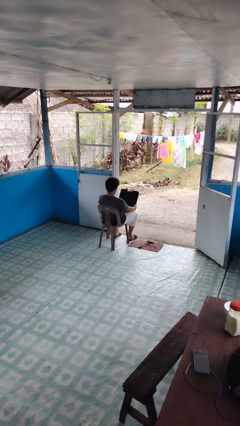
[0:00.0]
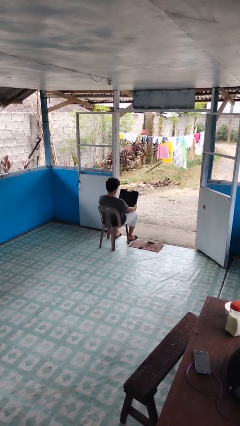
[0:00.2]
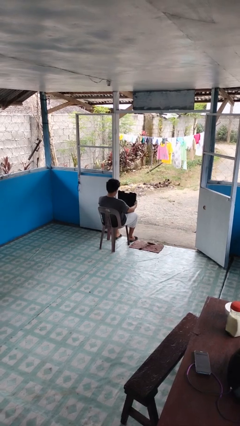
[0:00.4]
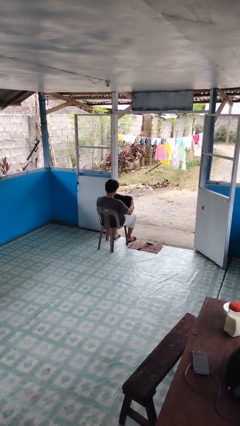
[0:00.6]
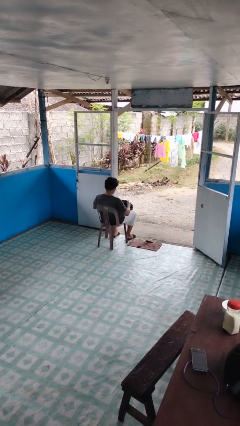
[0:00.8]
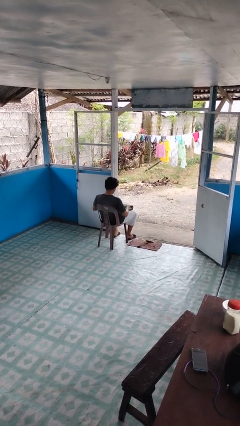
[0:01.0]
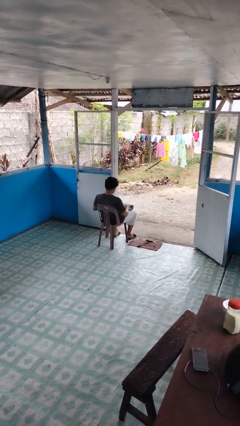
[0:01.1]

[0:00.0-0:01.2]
person closes suitcase

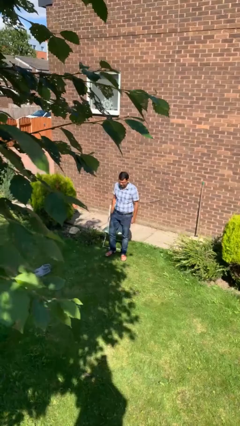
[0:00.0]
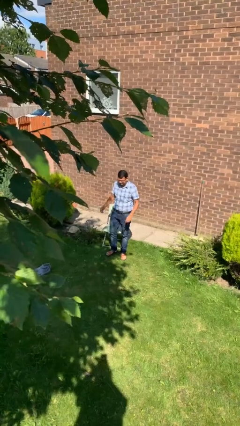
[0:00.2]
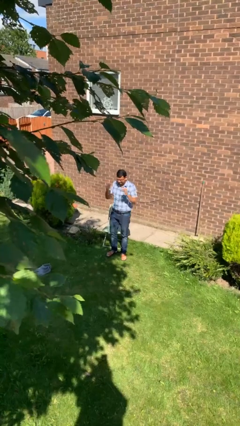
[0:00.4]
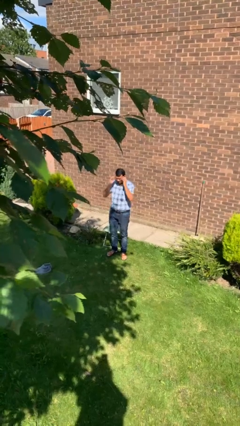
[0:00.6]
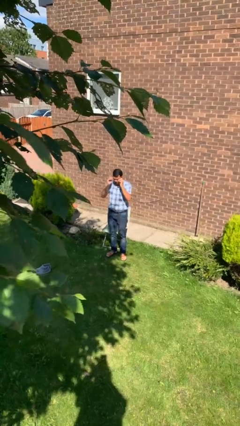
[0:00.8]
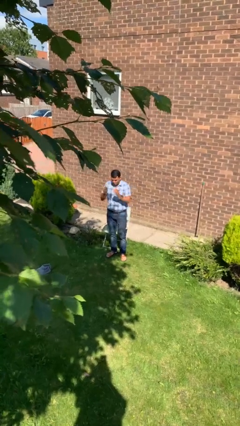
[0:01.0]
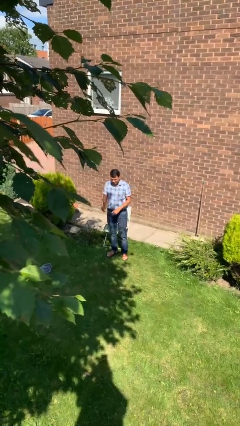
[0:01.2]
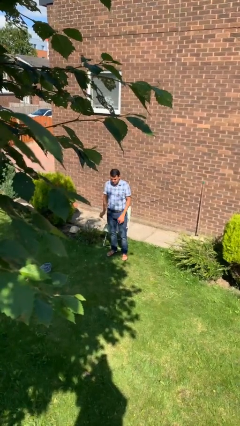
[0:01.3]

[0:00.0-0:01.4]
person takes off glasses

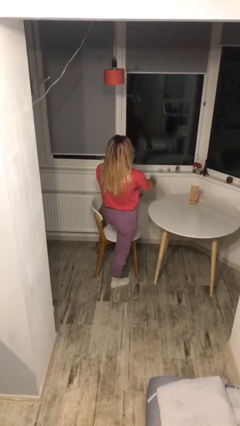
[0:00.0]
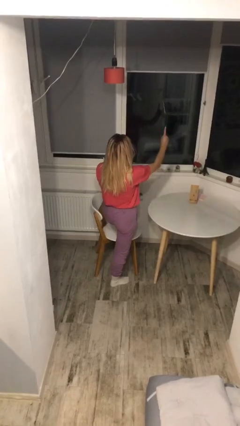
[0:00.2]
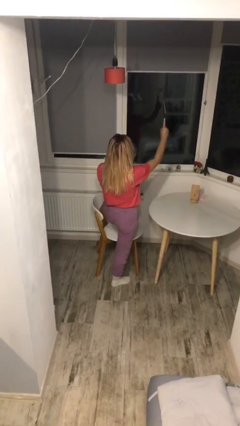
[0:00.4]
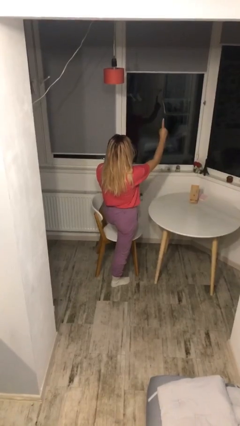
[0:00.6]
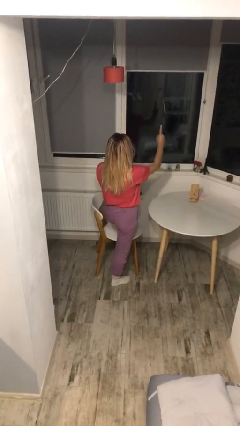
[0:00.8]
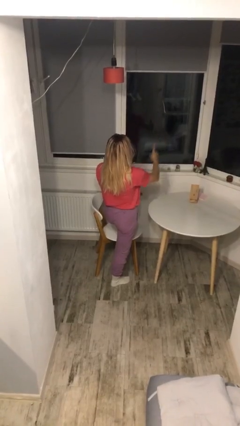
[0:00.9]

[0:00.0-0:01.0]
person gestures number one

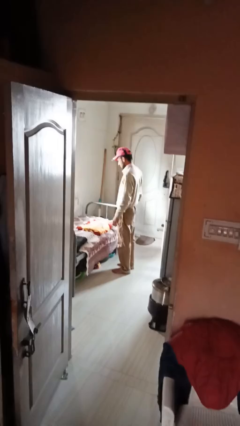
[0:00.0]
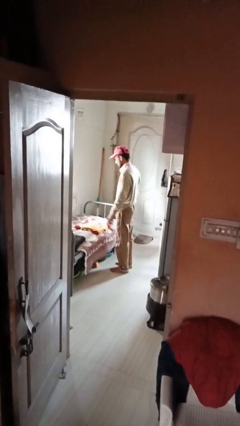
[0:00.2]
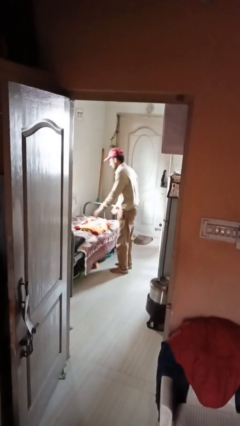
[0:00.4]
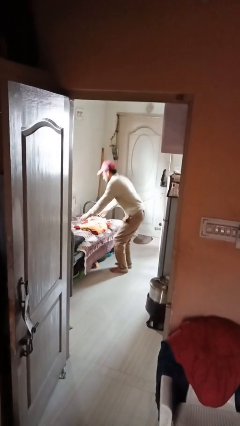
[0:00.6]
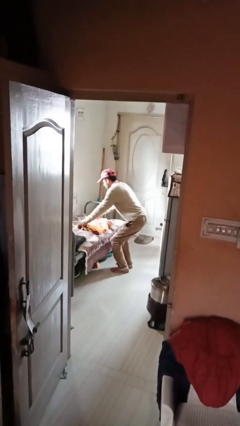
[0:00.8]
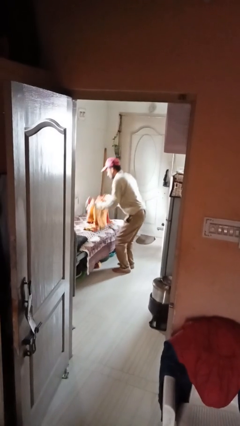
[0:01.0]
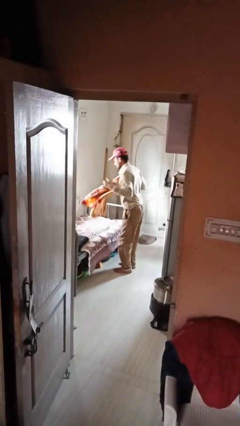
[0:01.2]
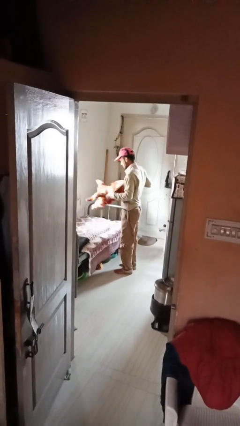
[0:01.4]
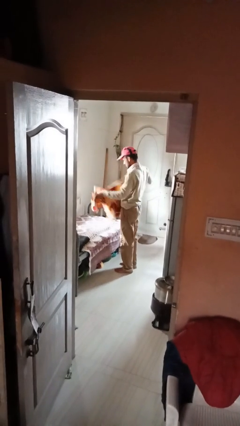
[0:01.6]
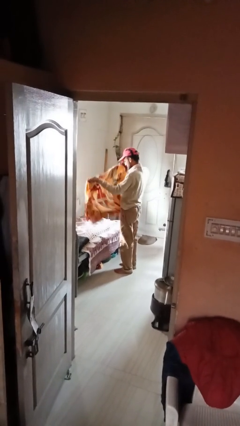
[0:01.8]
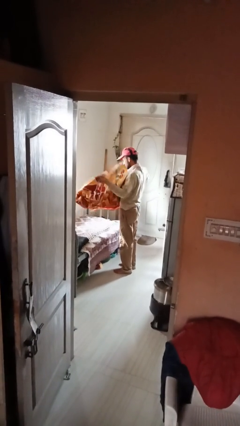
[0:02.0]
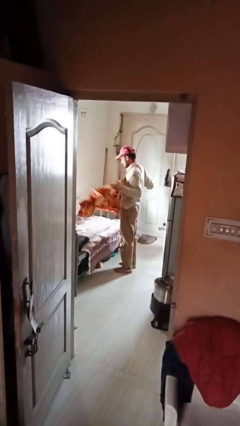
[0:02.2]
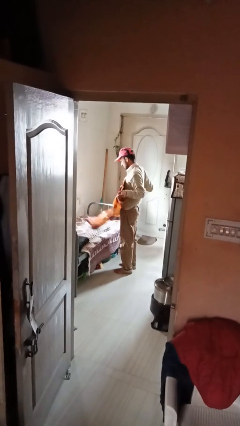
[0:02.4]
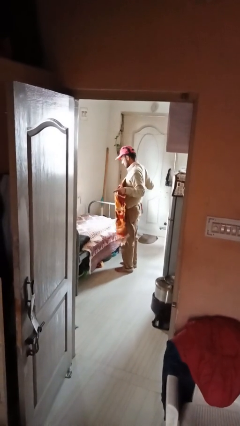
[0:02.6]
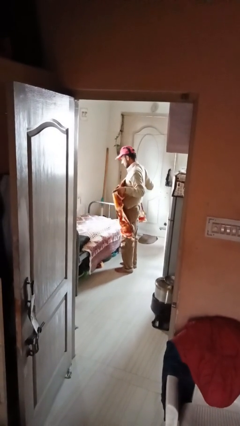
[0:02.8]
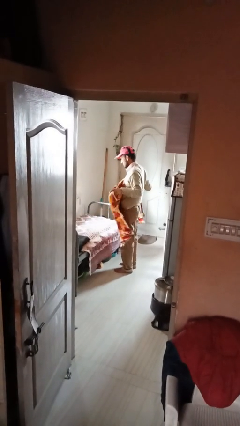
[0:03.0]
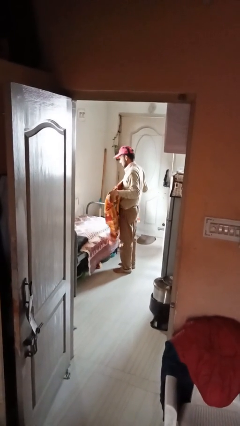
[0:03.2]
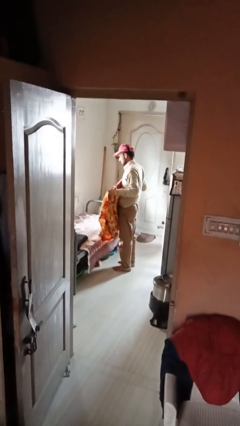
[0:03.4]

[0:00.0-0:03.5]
person unfolds blanket

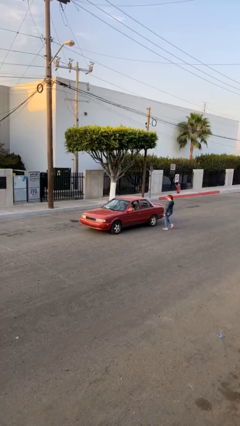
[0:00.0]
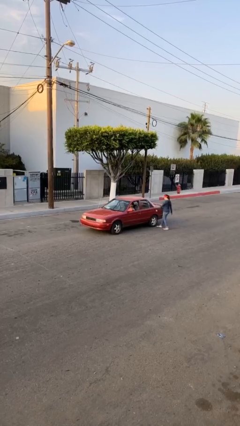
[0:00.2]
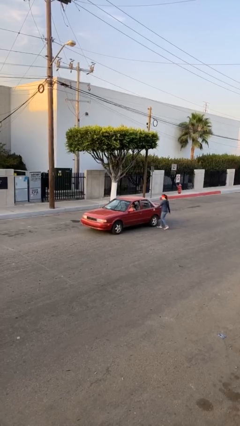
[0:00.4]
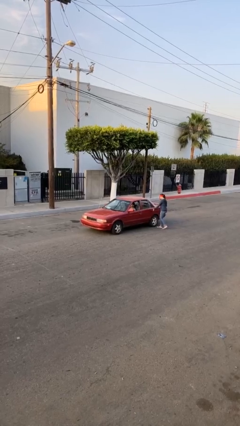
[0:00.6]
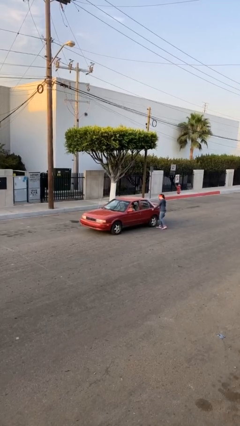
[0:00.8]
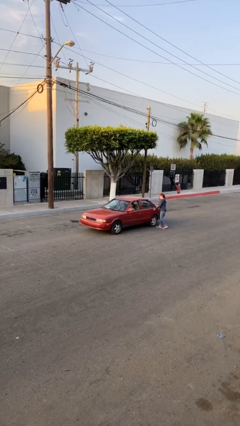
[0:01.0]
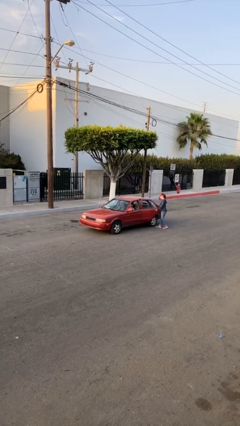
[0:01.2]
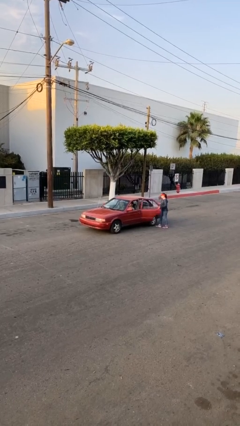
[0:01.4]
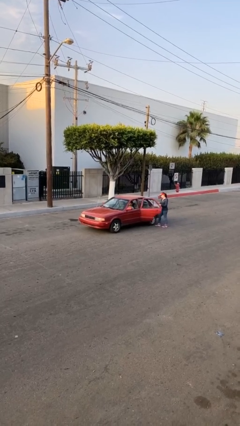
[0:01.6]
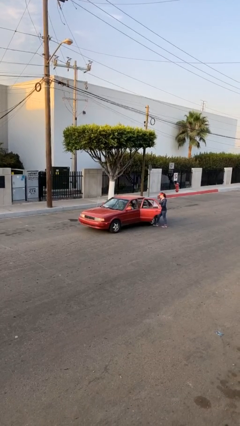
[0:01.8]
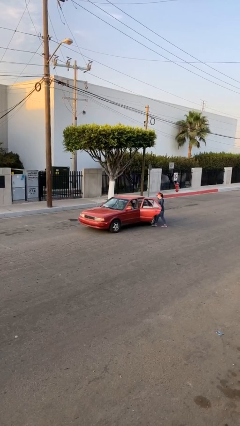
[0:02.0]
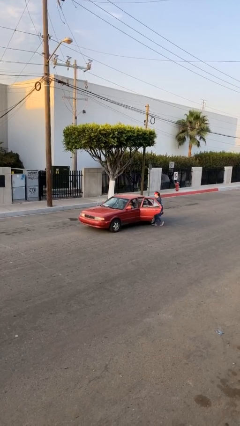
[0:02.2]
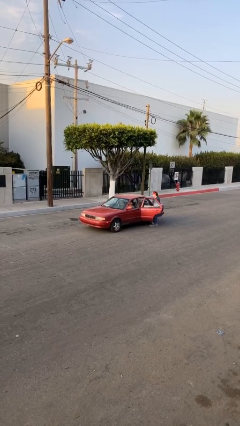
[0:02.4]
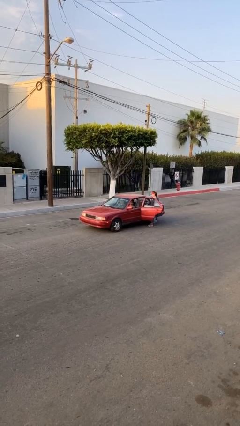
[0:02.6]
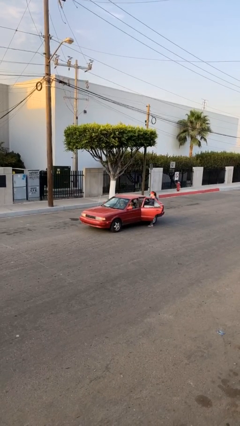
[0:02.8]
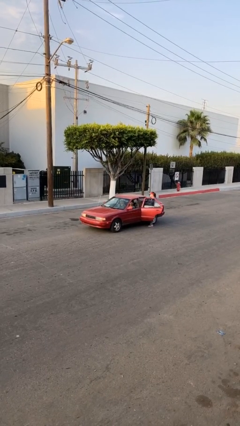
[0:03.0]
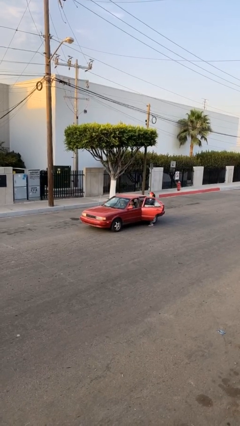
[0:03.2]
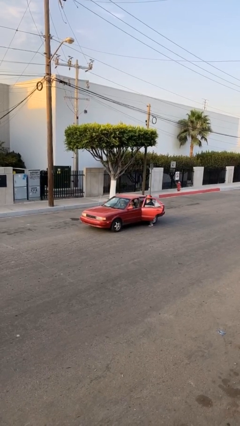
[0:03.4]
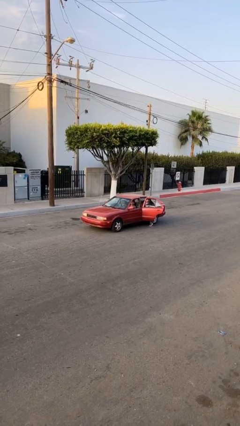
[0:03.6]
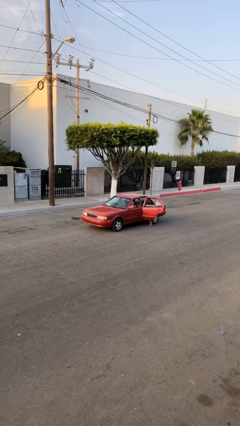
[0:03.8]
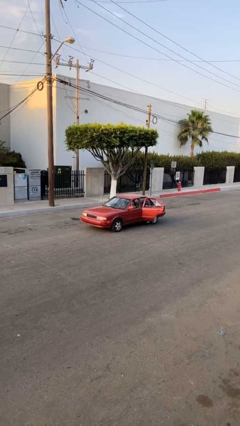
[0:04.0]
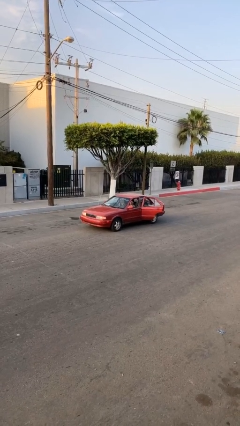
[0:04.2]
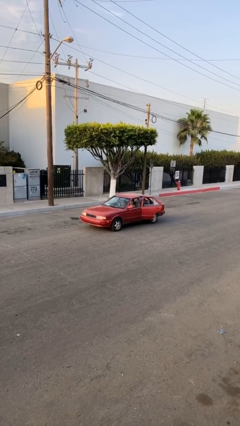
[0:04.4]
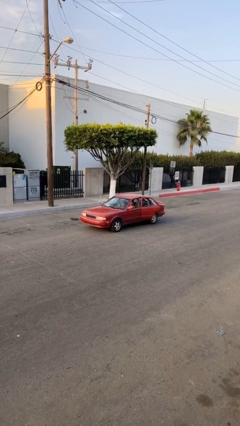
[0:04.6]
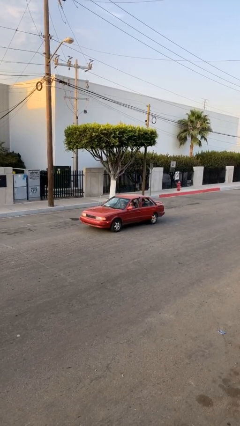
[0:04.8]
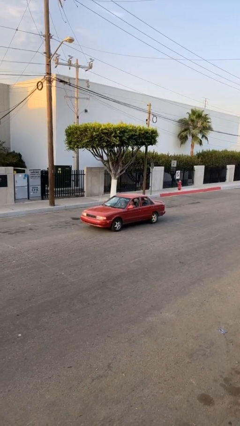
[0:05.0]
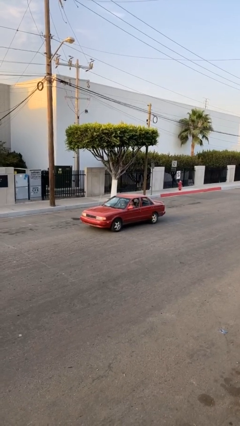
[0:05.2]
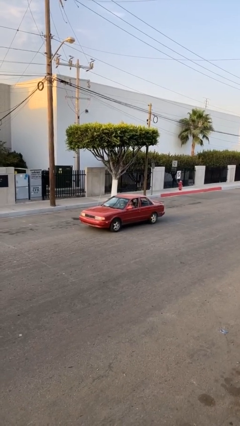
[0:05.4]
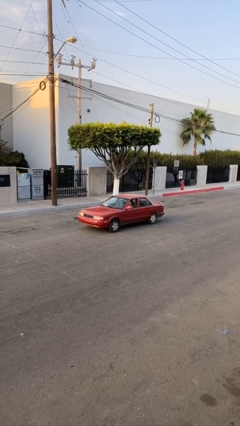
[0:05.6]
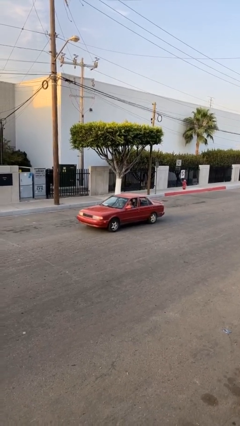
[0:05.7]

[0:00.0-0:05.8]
car picks up person

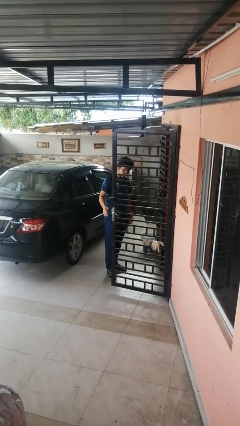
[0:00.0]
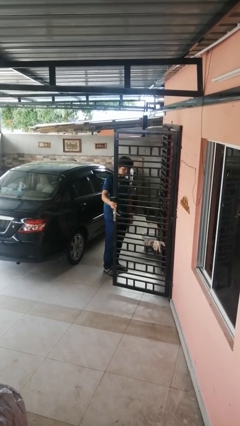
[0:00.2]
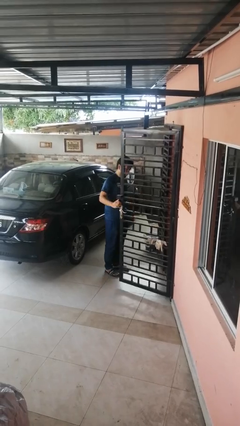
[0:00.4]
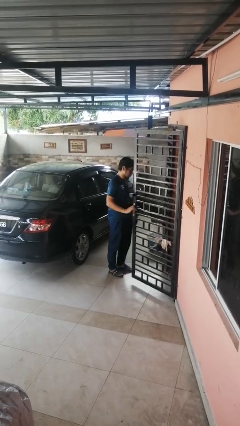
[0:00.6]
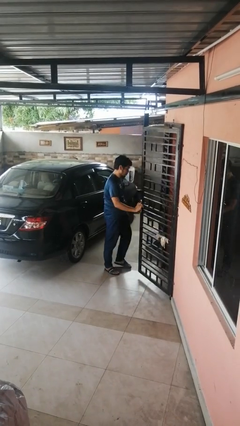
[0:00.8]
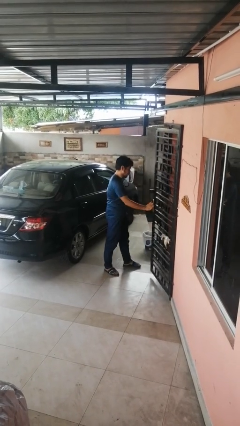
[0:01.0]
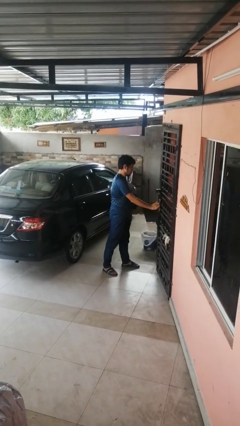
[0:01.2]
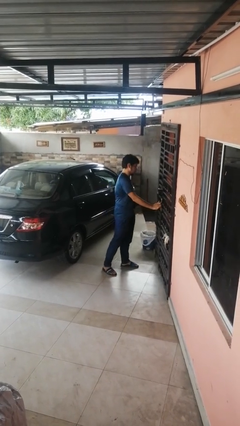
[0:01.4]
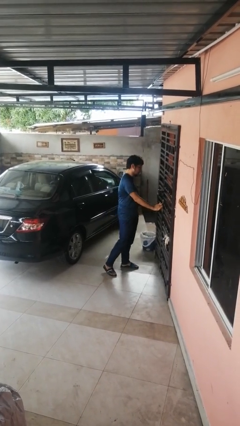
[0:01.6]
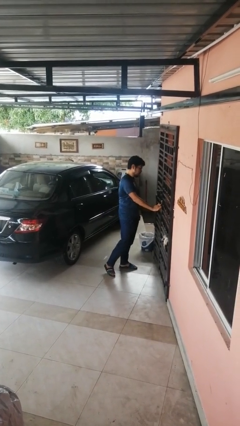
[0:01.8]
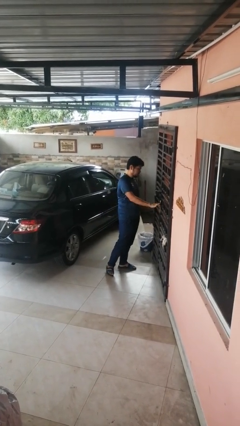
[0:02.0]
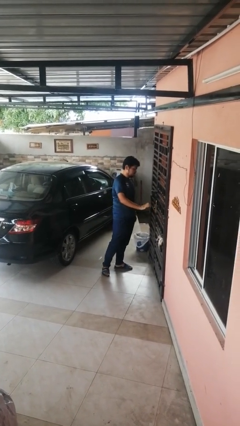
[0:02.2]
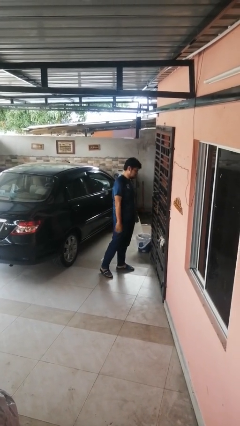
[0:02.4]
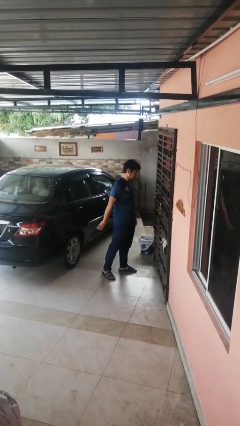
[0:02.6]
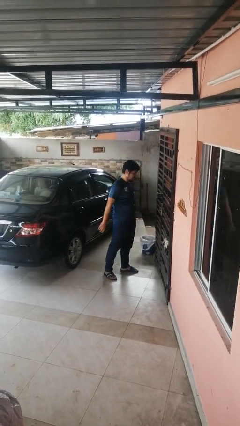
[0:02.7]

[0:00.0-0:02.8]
person closes gate

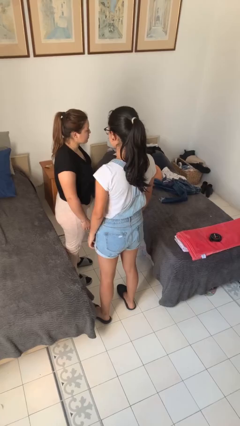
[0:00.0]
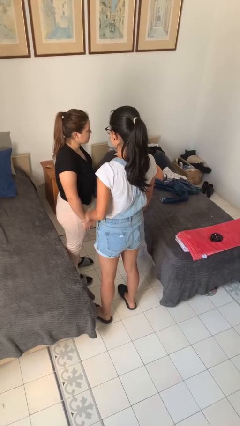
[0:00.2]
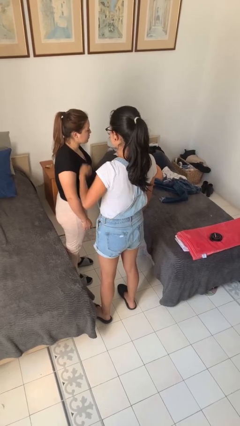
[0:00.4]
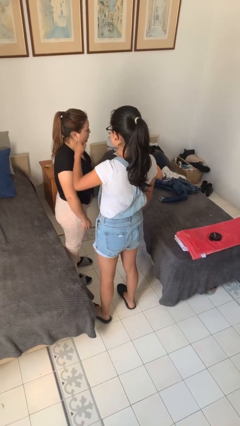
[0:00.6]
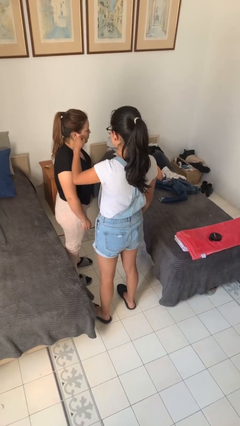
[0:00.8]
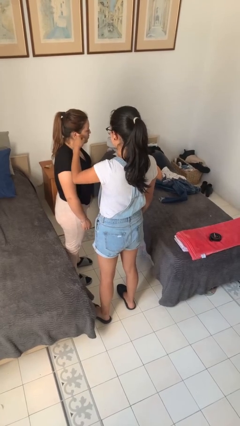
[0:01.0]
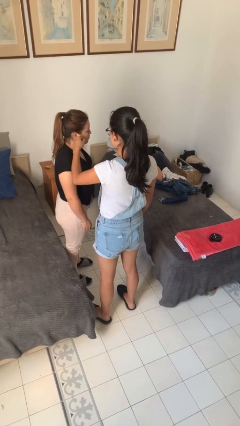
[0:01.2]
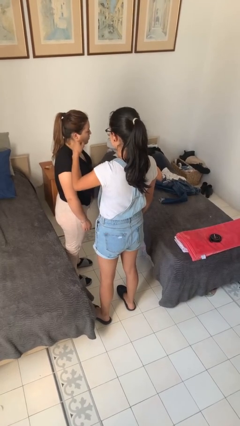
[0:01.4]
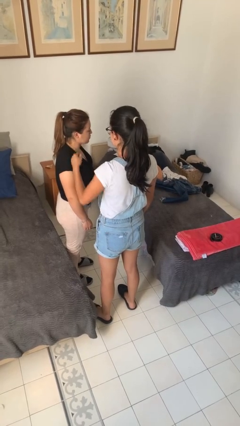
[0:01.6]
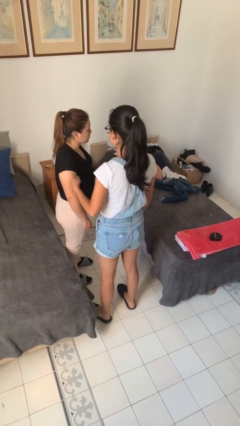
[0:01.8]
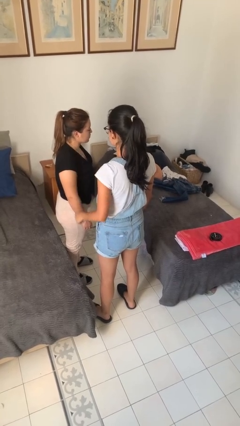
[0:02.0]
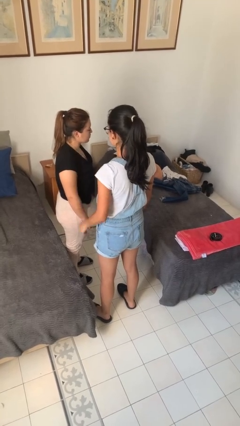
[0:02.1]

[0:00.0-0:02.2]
person touches face of person
